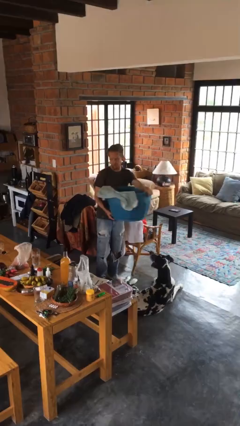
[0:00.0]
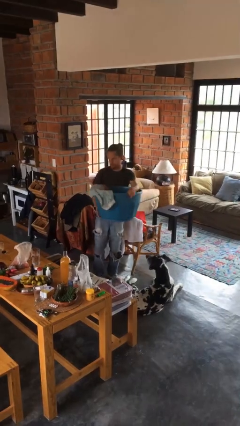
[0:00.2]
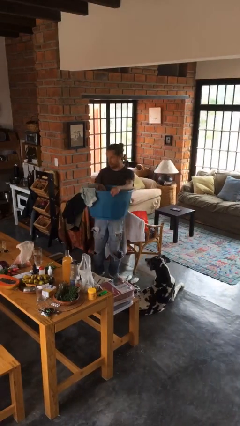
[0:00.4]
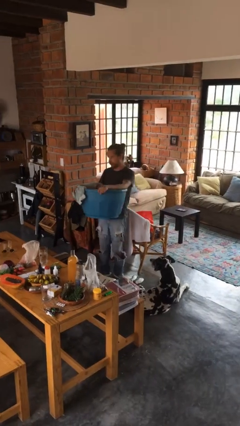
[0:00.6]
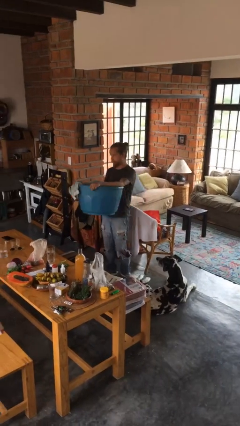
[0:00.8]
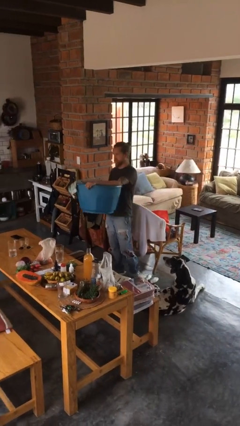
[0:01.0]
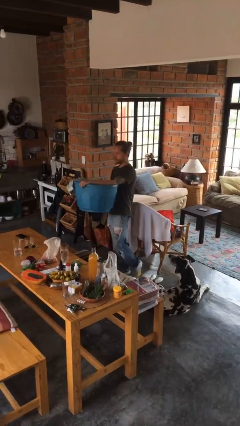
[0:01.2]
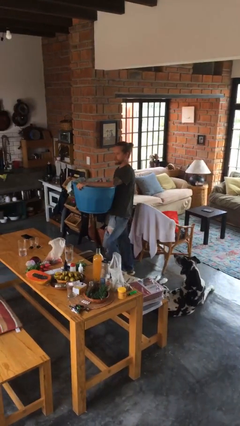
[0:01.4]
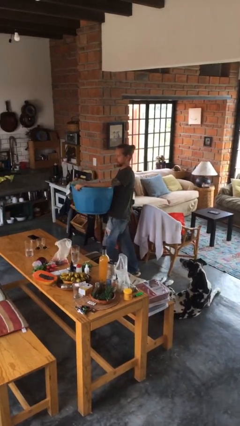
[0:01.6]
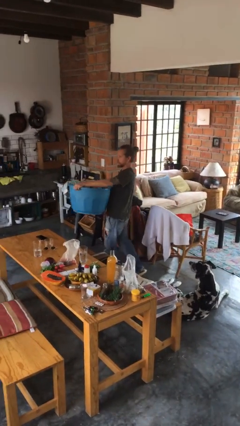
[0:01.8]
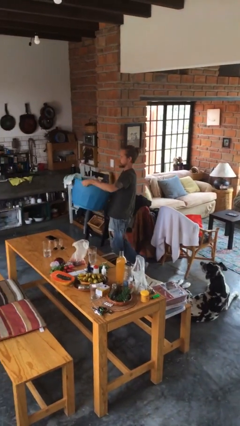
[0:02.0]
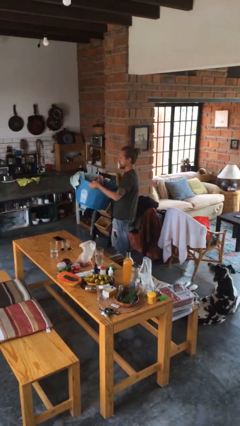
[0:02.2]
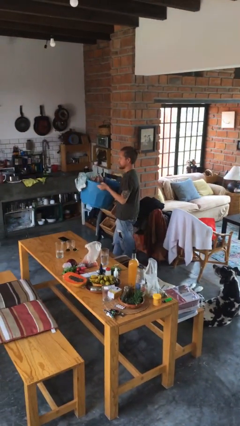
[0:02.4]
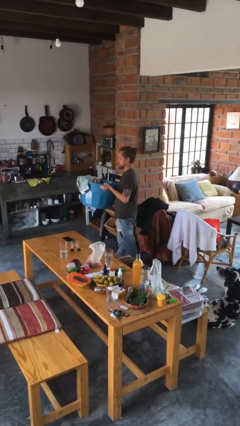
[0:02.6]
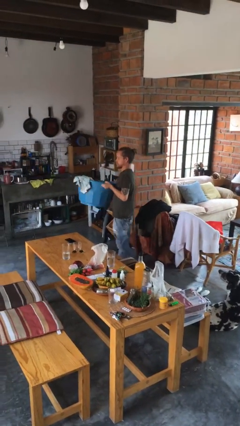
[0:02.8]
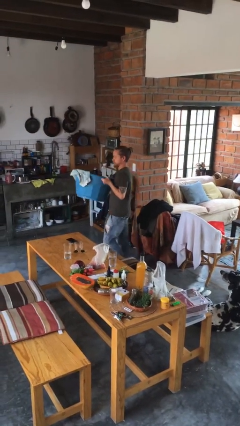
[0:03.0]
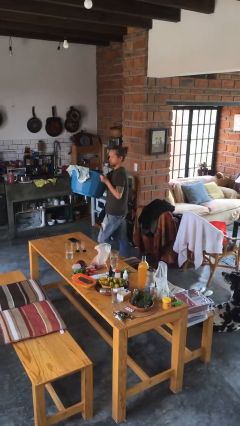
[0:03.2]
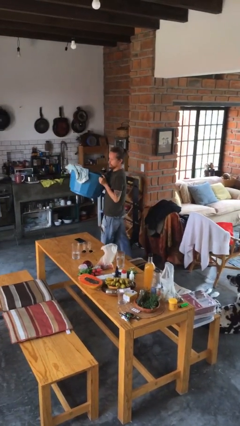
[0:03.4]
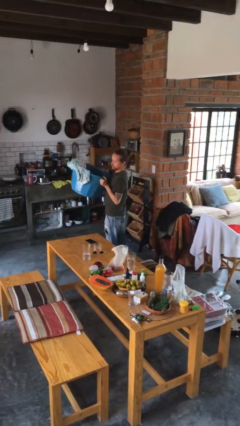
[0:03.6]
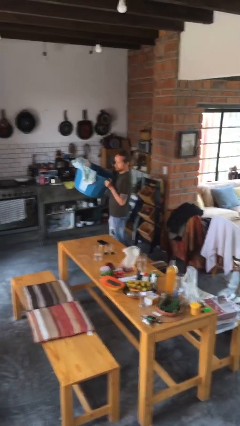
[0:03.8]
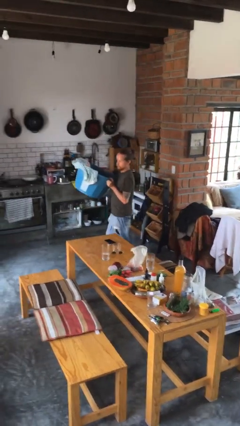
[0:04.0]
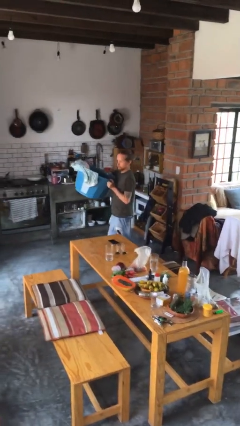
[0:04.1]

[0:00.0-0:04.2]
person carries laundry basket

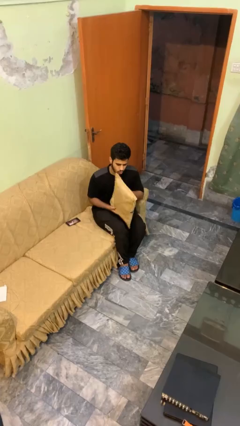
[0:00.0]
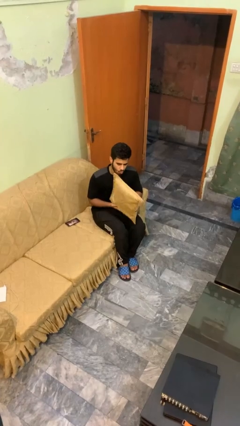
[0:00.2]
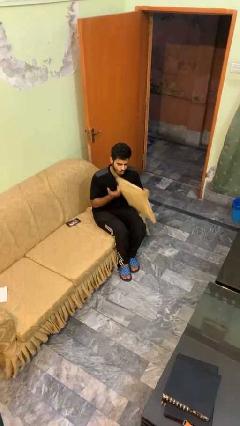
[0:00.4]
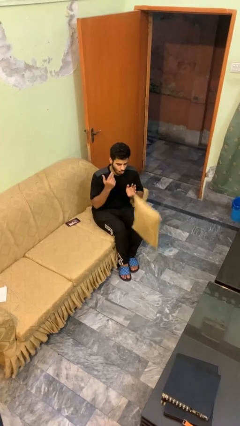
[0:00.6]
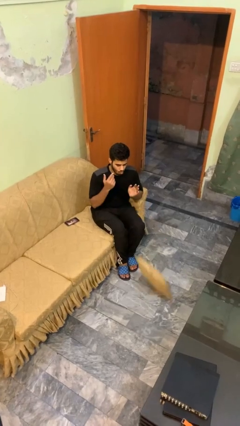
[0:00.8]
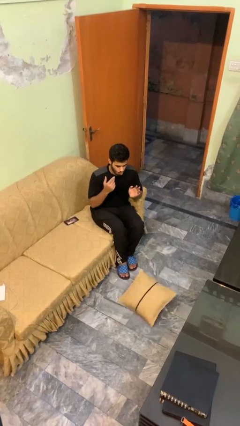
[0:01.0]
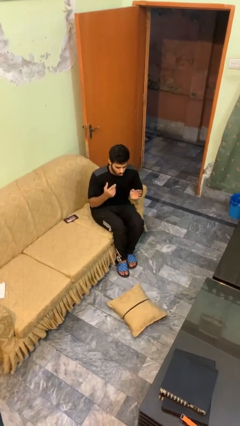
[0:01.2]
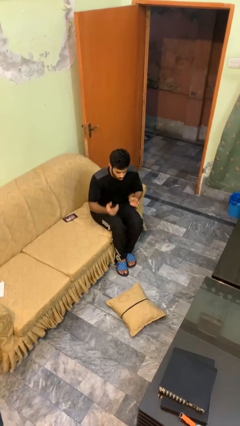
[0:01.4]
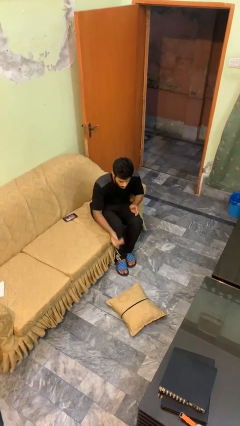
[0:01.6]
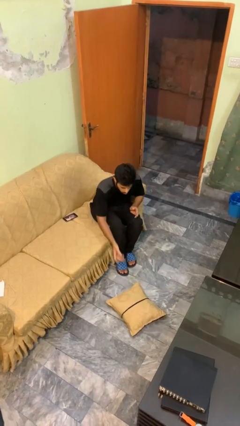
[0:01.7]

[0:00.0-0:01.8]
person drops object

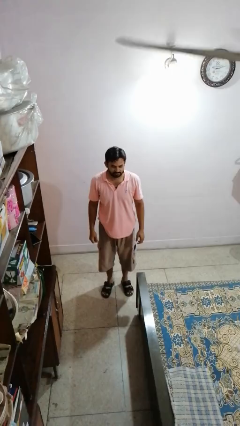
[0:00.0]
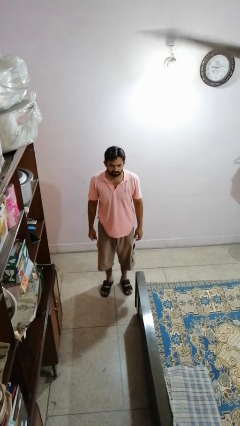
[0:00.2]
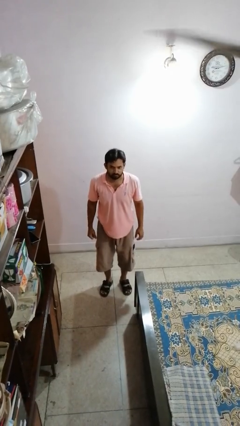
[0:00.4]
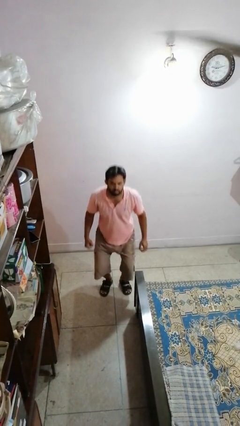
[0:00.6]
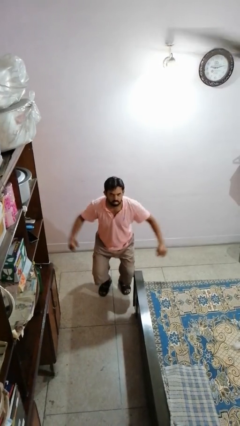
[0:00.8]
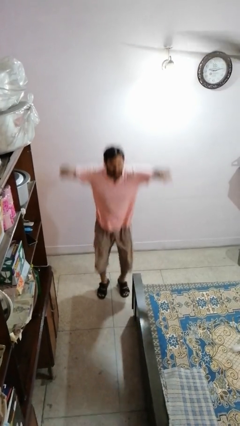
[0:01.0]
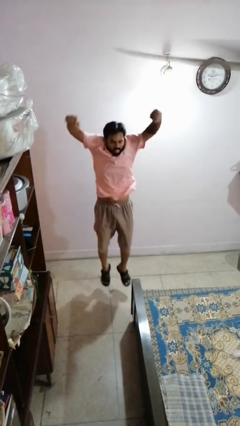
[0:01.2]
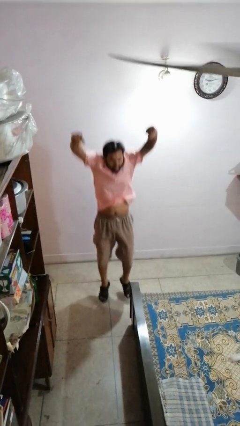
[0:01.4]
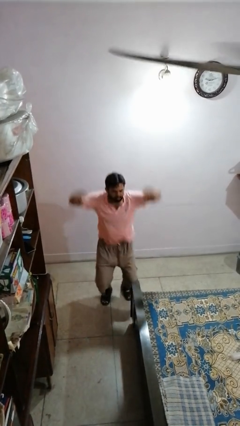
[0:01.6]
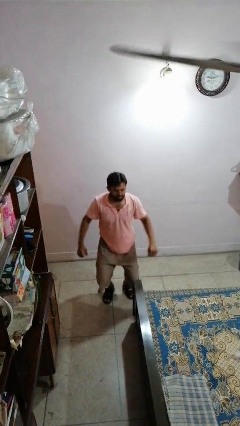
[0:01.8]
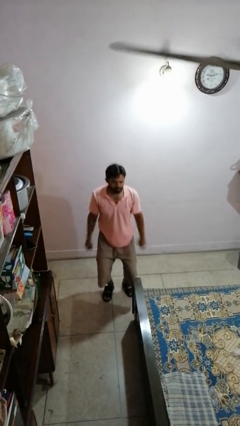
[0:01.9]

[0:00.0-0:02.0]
person jumps

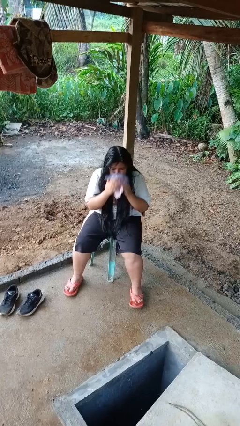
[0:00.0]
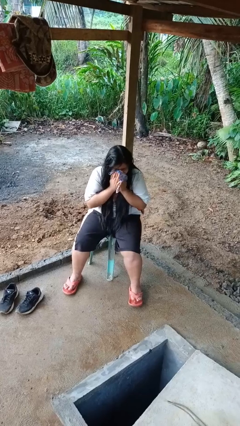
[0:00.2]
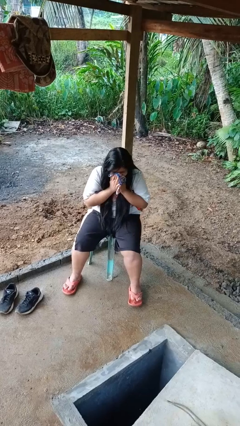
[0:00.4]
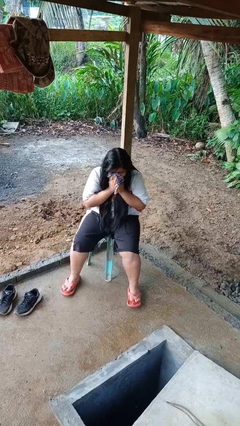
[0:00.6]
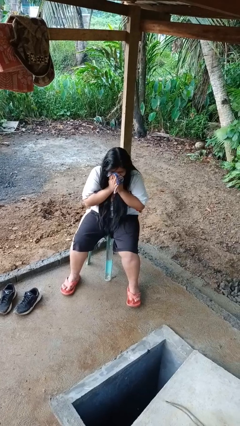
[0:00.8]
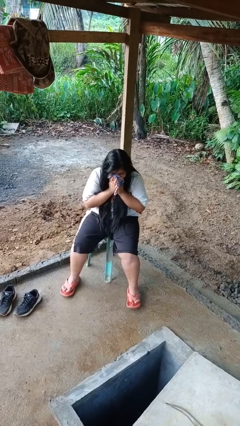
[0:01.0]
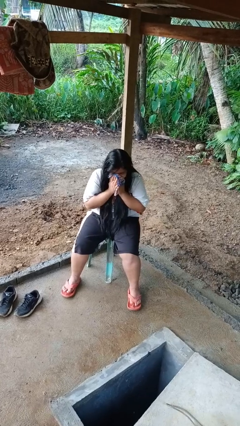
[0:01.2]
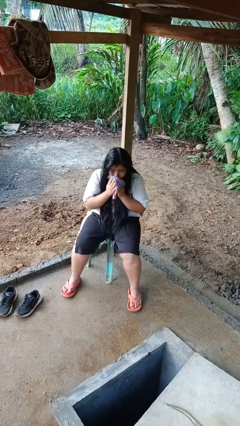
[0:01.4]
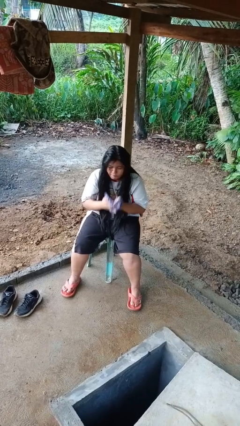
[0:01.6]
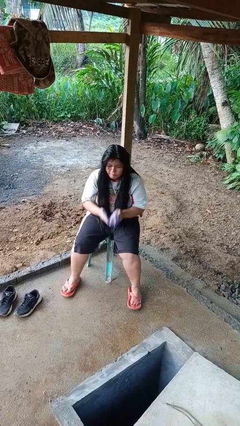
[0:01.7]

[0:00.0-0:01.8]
person blows nose

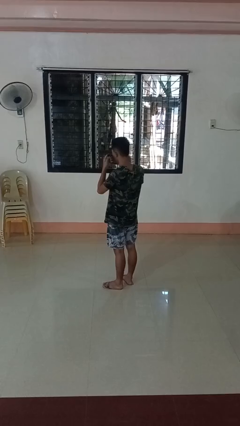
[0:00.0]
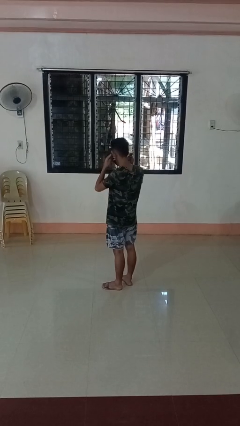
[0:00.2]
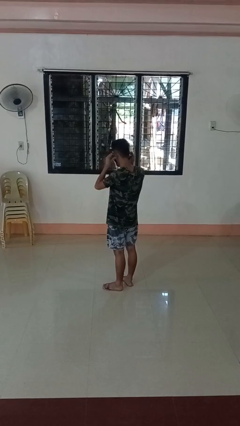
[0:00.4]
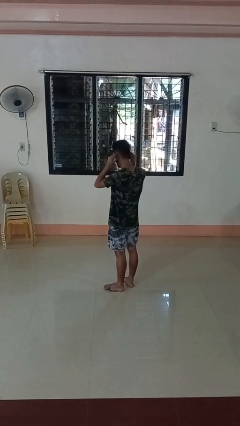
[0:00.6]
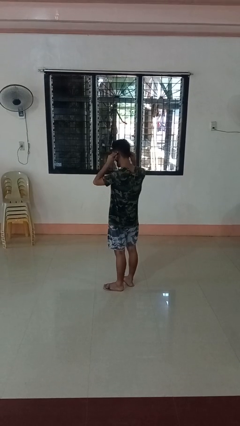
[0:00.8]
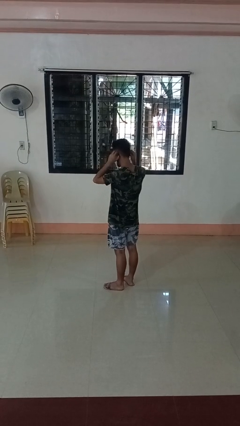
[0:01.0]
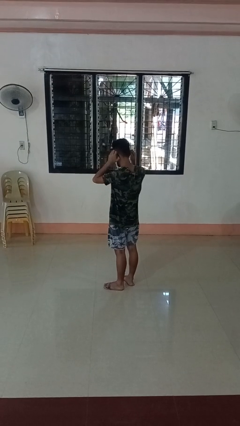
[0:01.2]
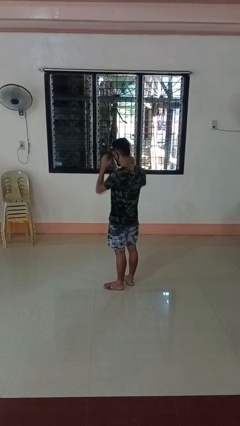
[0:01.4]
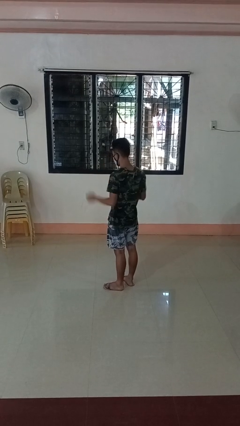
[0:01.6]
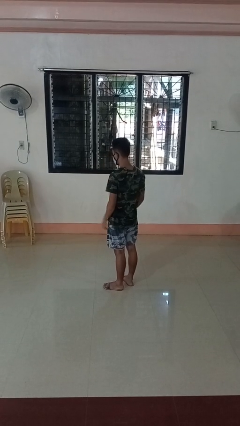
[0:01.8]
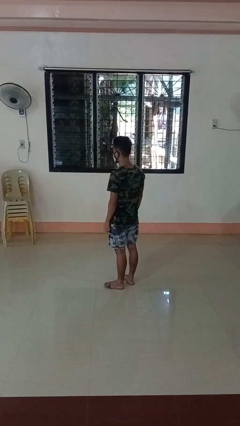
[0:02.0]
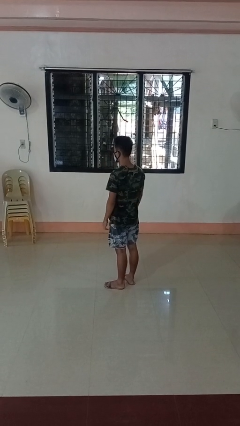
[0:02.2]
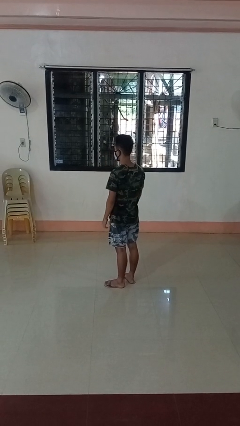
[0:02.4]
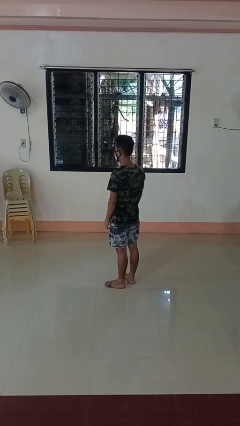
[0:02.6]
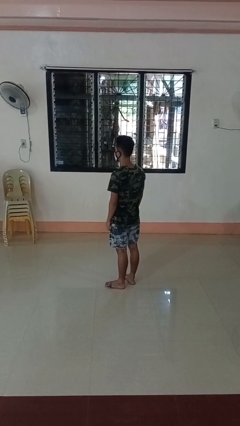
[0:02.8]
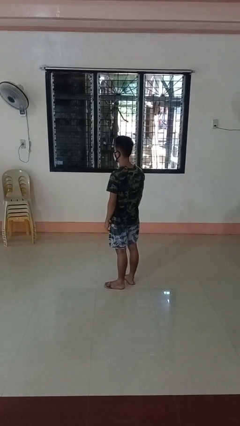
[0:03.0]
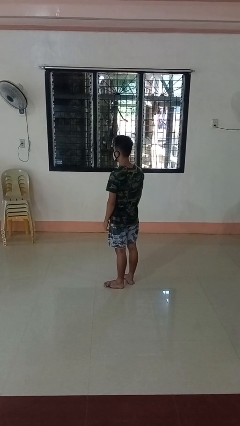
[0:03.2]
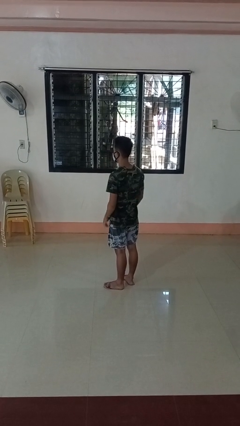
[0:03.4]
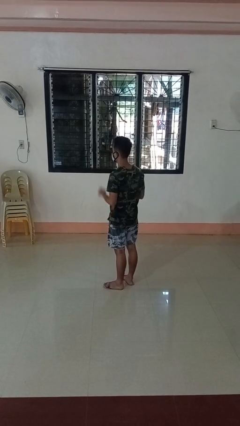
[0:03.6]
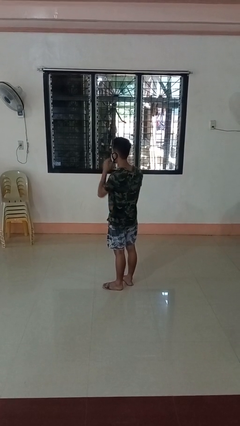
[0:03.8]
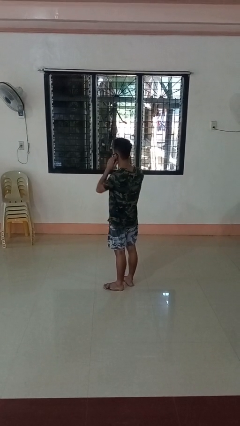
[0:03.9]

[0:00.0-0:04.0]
person puts on facemask

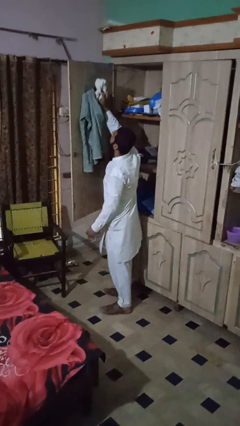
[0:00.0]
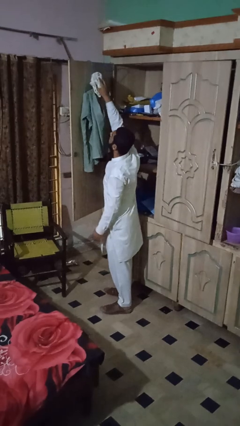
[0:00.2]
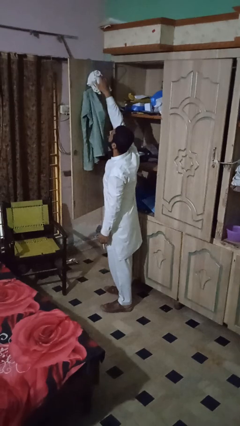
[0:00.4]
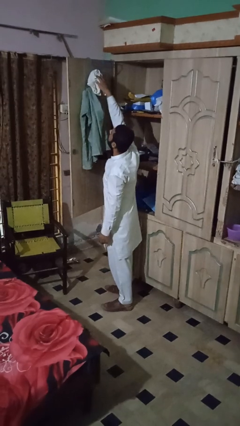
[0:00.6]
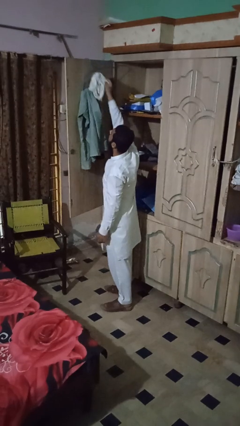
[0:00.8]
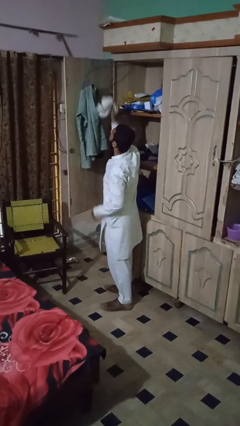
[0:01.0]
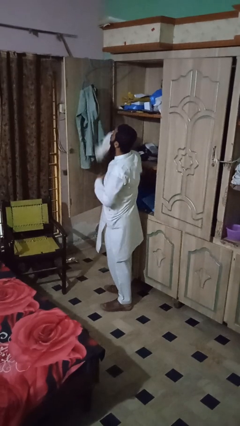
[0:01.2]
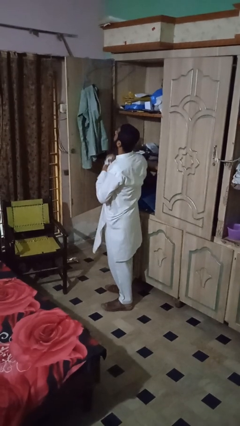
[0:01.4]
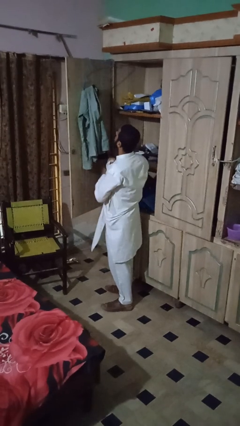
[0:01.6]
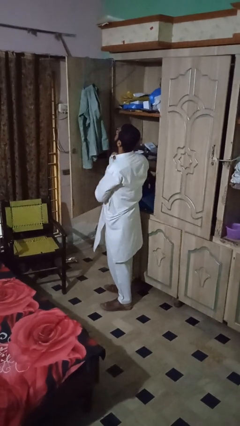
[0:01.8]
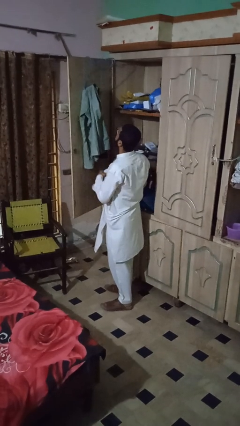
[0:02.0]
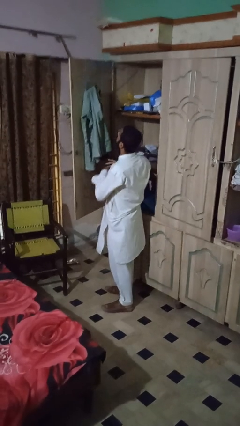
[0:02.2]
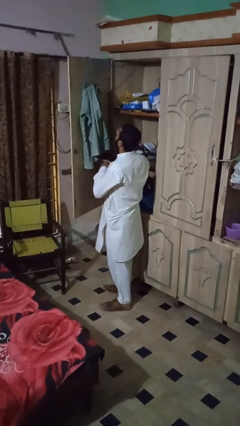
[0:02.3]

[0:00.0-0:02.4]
person takes clothes from closet

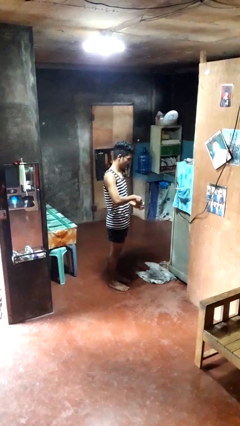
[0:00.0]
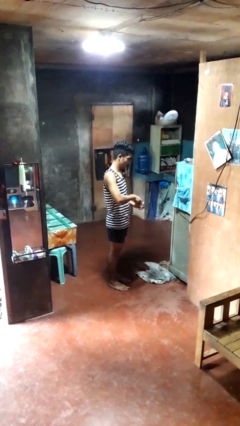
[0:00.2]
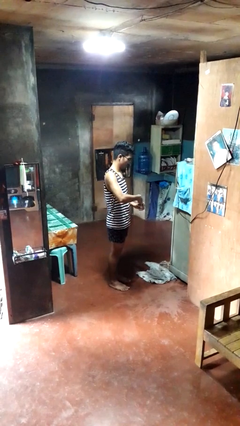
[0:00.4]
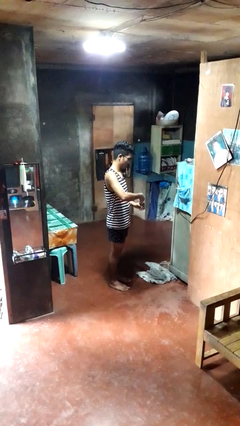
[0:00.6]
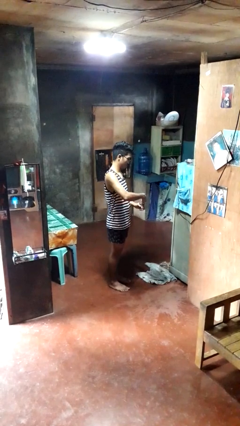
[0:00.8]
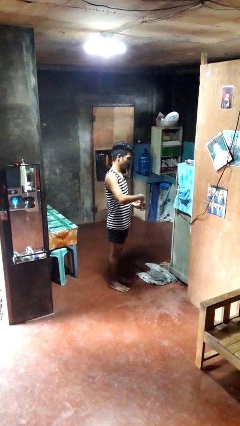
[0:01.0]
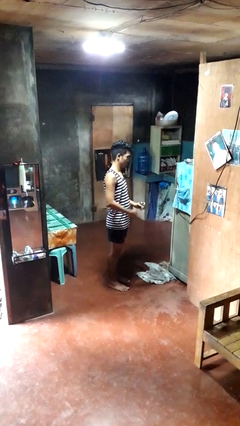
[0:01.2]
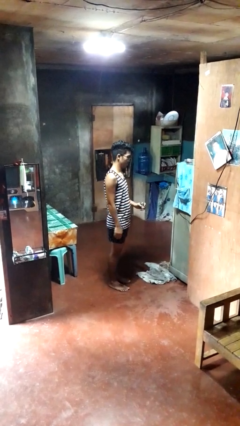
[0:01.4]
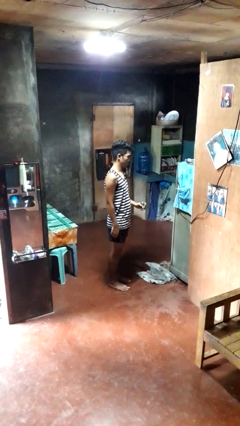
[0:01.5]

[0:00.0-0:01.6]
person opens beverage can
